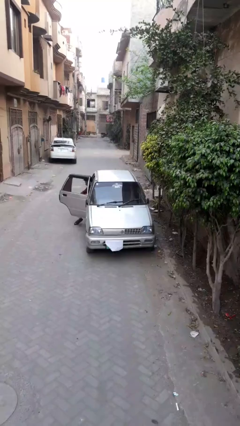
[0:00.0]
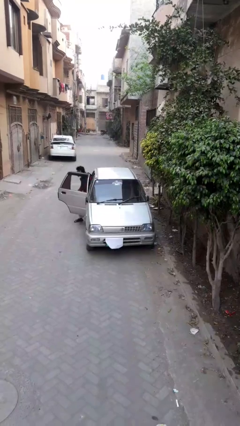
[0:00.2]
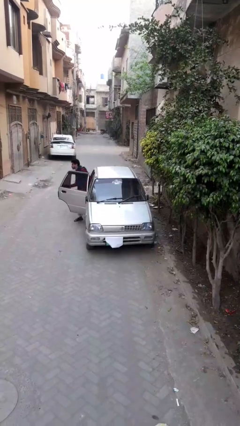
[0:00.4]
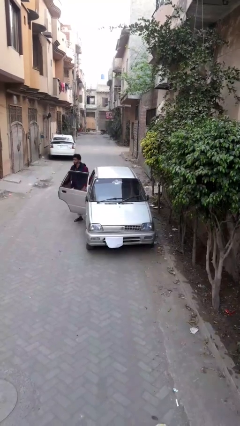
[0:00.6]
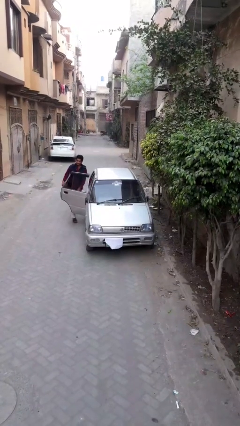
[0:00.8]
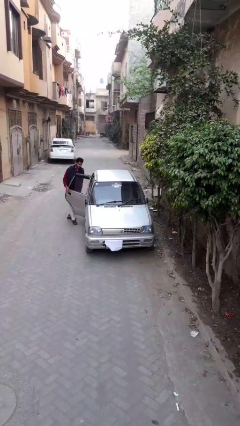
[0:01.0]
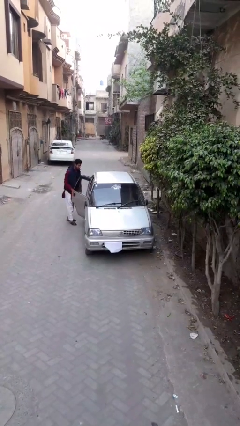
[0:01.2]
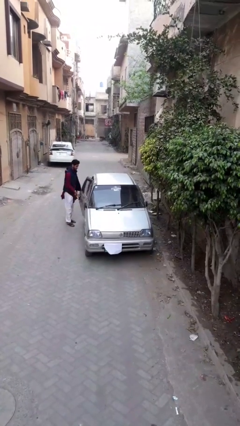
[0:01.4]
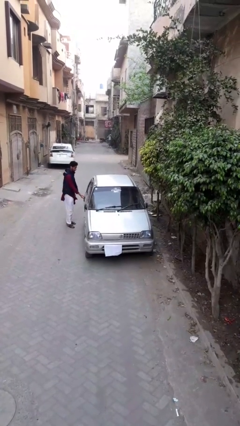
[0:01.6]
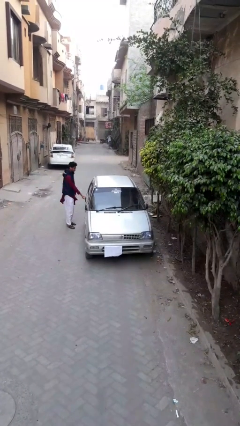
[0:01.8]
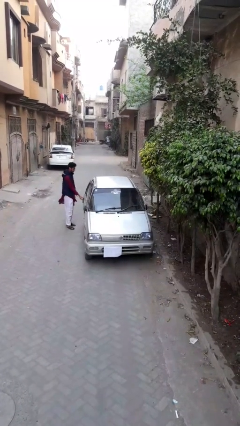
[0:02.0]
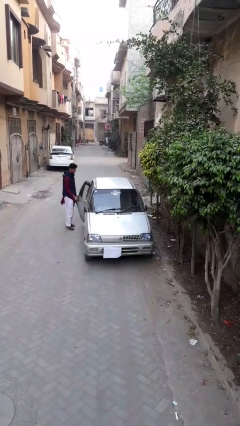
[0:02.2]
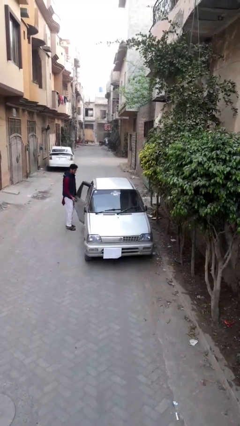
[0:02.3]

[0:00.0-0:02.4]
car drops off person

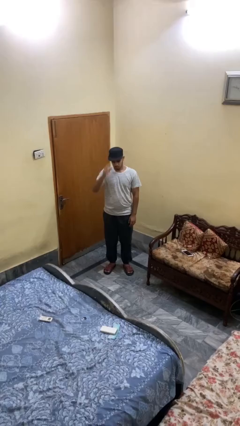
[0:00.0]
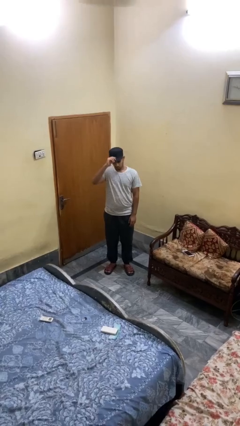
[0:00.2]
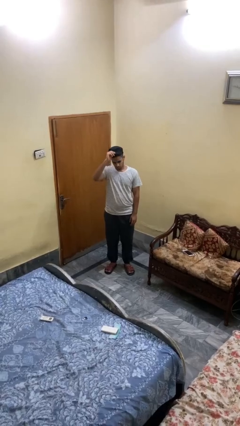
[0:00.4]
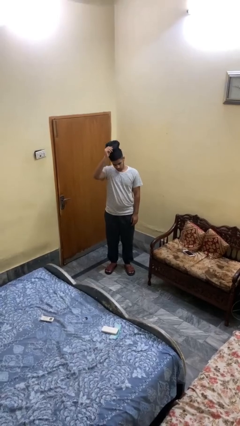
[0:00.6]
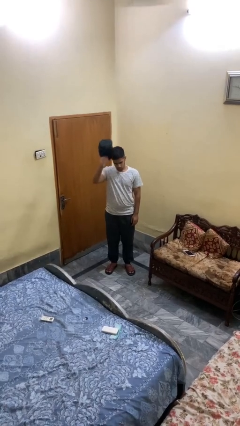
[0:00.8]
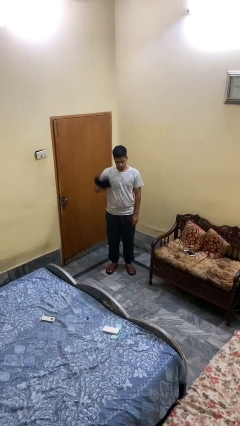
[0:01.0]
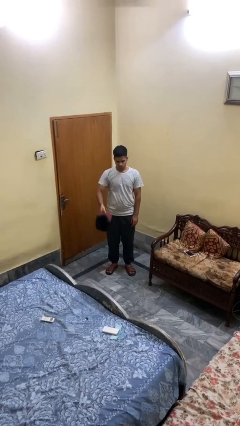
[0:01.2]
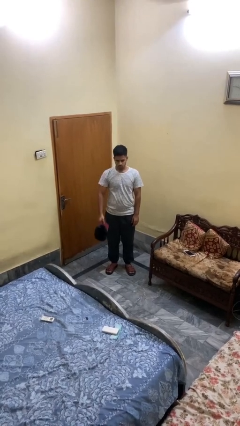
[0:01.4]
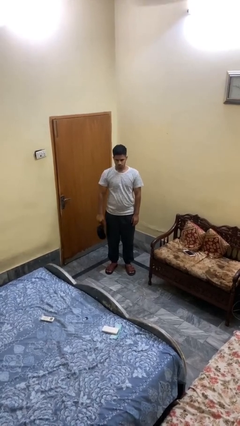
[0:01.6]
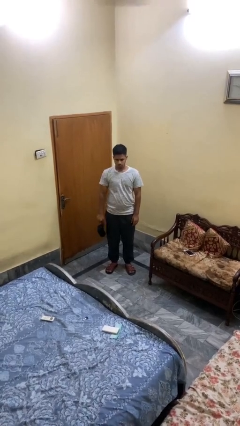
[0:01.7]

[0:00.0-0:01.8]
person takes off hat

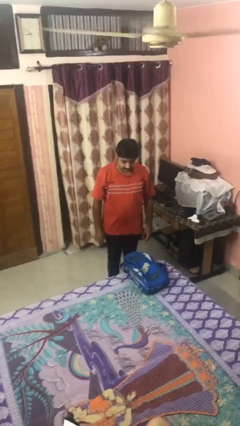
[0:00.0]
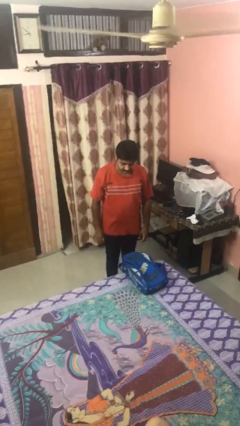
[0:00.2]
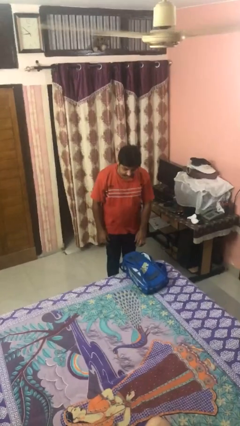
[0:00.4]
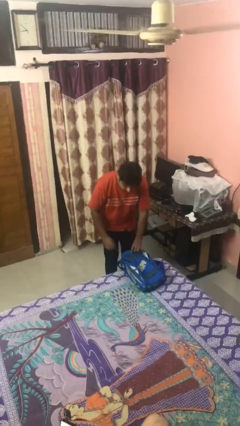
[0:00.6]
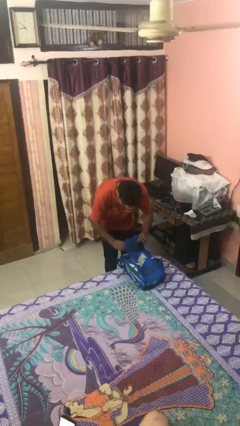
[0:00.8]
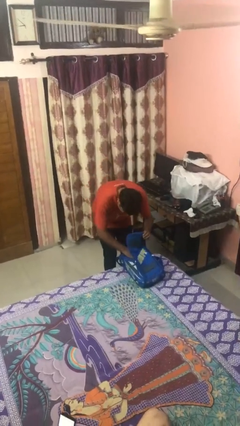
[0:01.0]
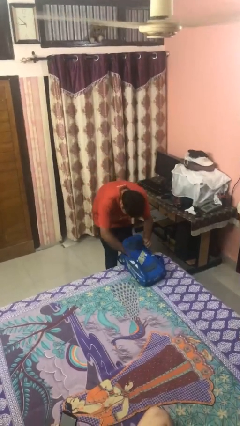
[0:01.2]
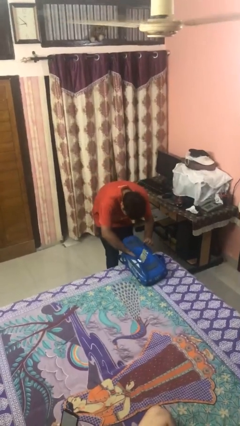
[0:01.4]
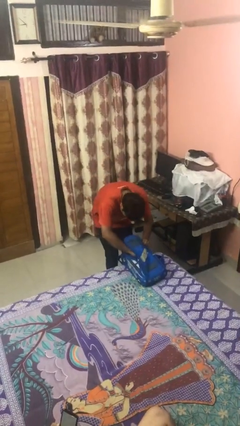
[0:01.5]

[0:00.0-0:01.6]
person searches in backpack

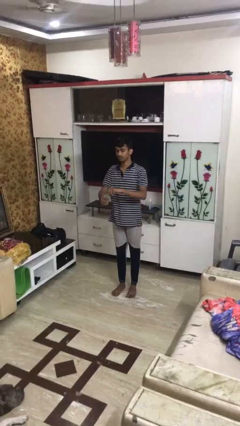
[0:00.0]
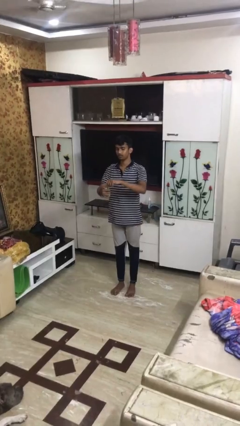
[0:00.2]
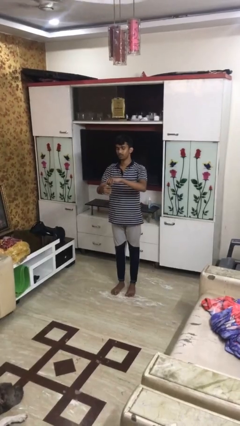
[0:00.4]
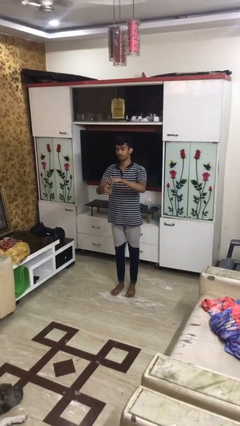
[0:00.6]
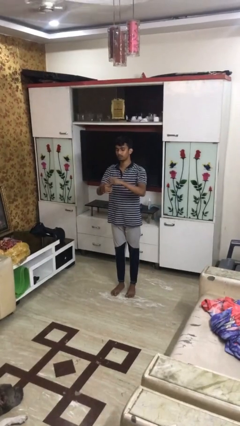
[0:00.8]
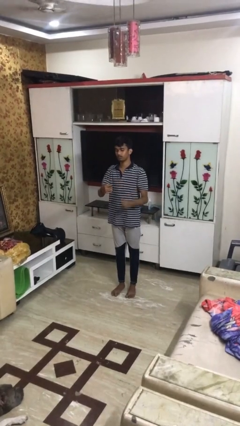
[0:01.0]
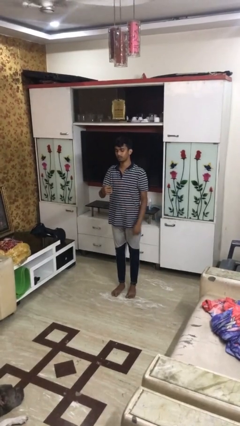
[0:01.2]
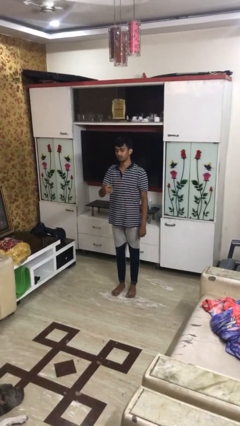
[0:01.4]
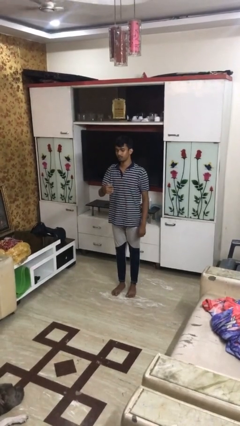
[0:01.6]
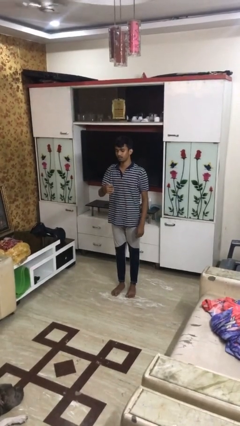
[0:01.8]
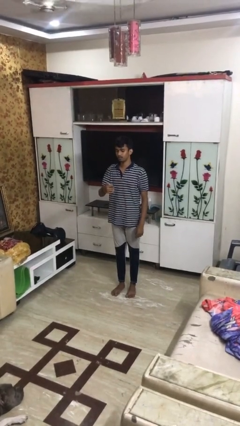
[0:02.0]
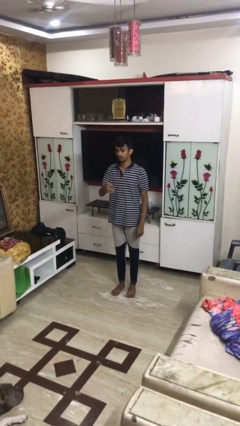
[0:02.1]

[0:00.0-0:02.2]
person opens beverage can

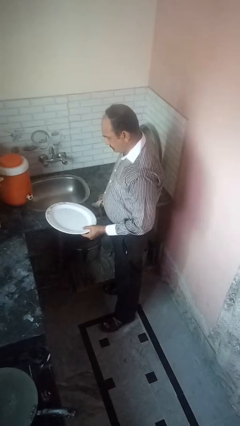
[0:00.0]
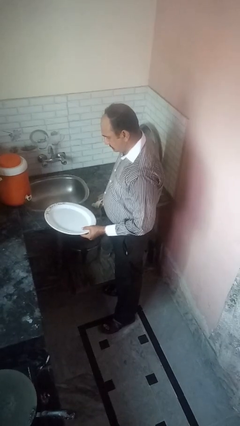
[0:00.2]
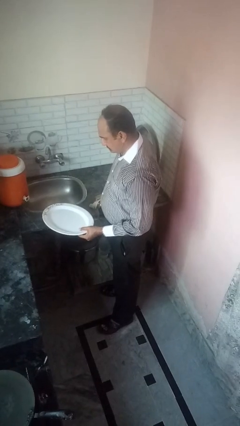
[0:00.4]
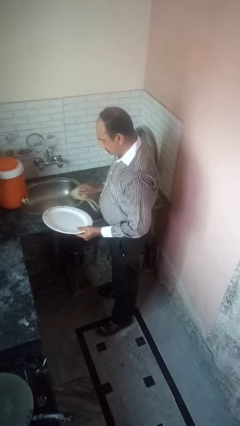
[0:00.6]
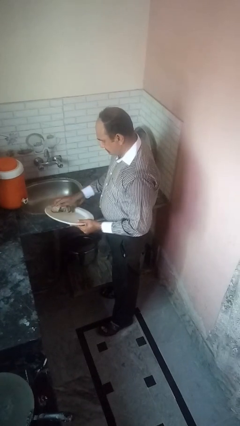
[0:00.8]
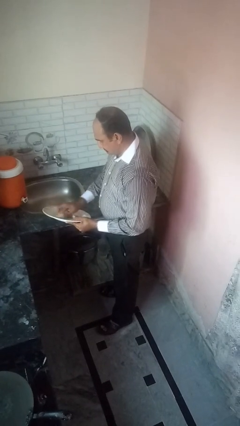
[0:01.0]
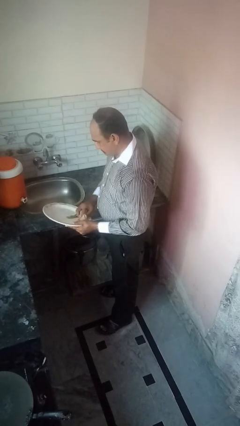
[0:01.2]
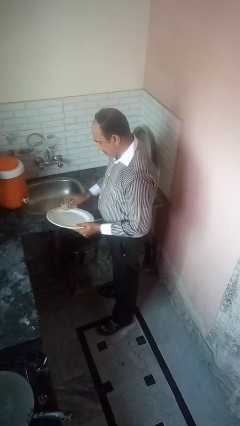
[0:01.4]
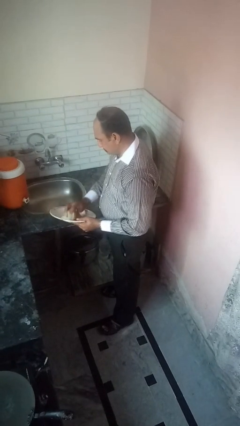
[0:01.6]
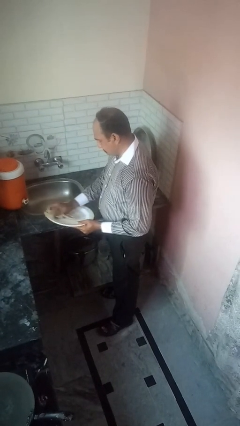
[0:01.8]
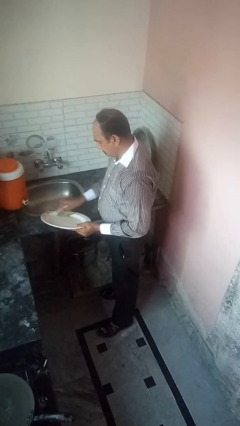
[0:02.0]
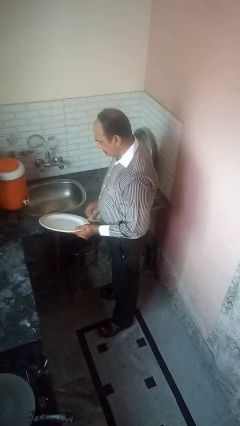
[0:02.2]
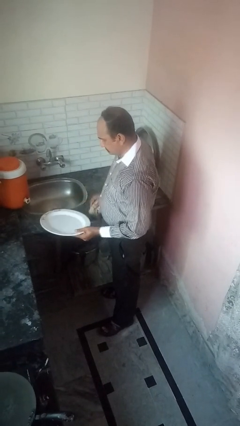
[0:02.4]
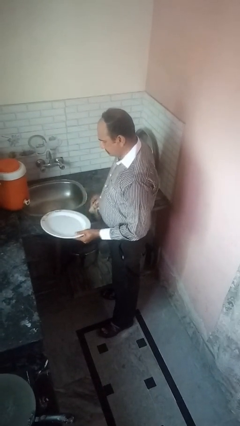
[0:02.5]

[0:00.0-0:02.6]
person dries dish

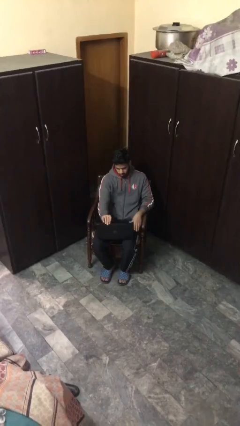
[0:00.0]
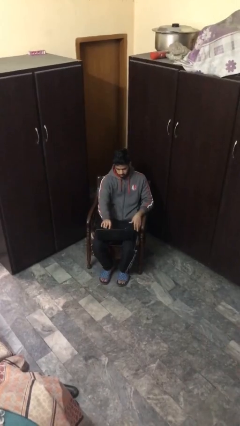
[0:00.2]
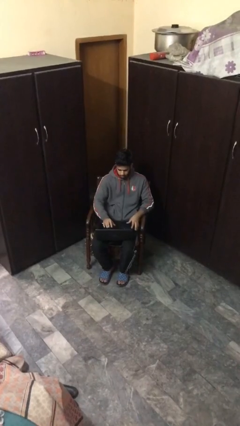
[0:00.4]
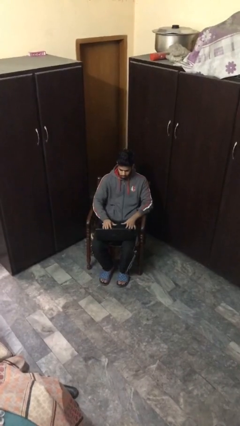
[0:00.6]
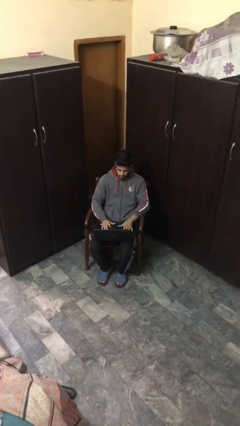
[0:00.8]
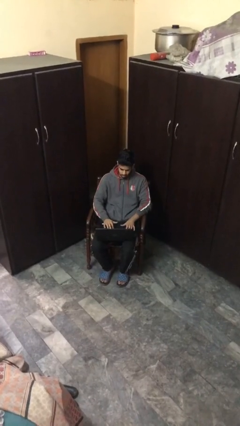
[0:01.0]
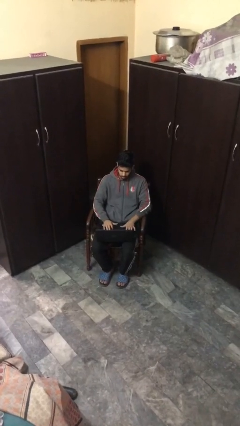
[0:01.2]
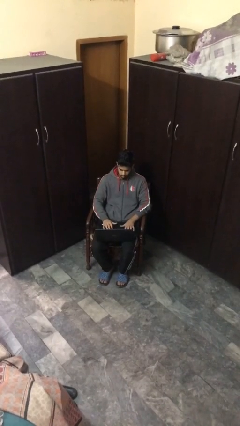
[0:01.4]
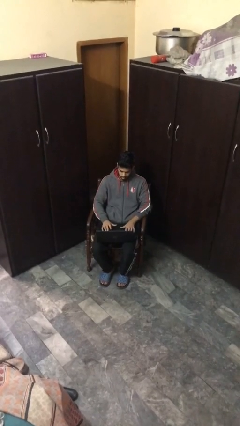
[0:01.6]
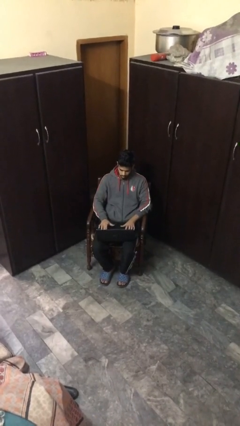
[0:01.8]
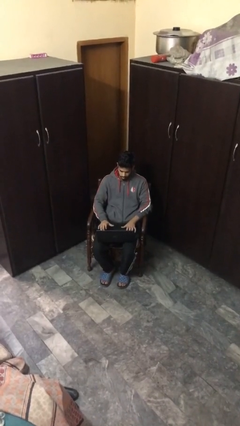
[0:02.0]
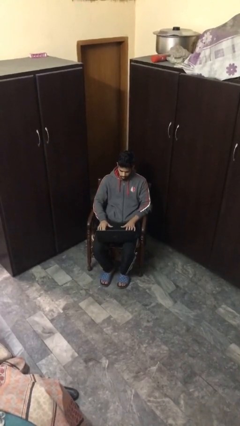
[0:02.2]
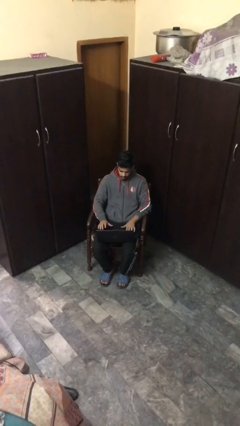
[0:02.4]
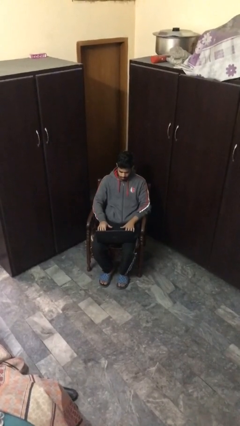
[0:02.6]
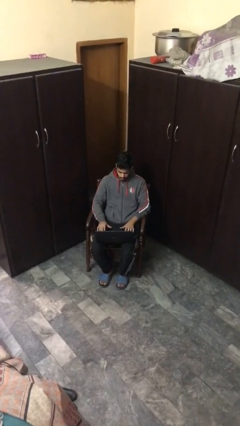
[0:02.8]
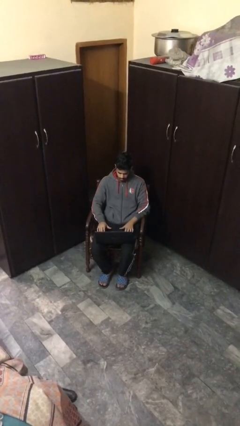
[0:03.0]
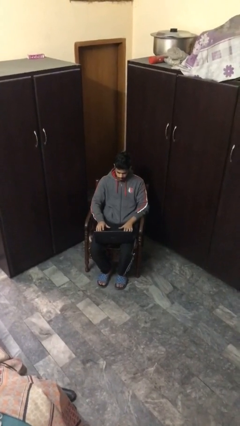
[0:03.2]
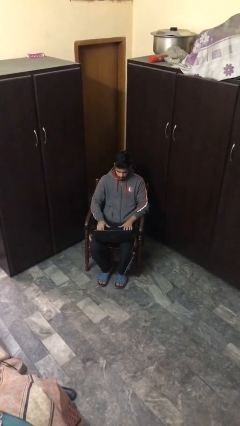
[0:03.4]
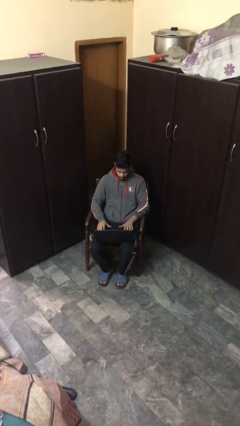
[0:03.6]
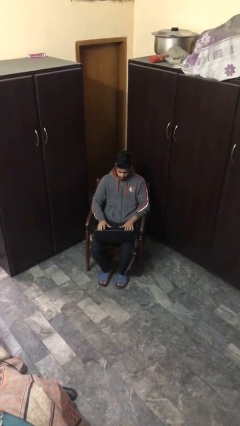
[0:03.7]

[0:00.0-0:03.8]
person interacts with laptop

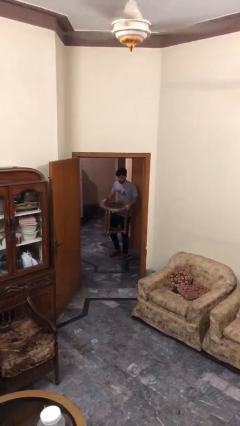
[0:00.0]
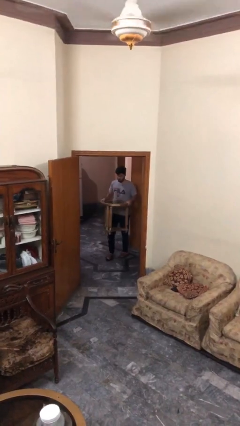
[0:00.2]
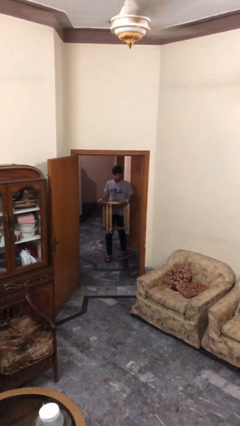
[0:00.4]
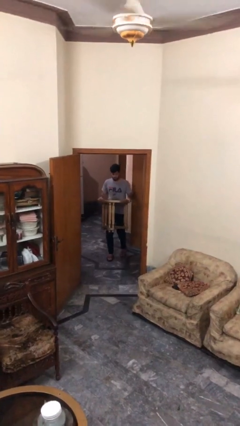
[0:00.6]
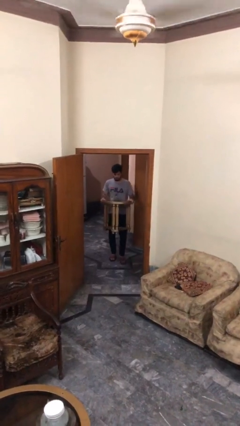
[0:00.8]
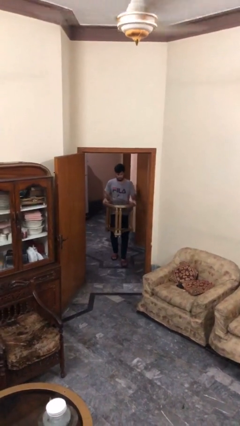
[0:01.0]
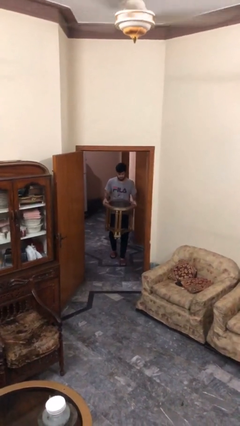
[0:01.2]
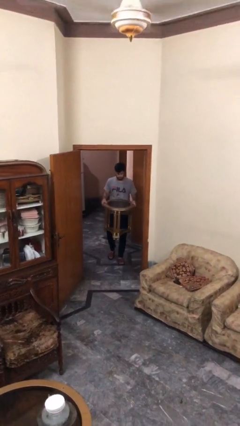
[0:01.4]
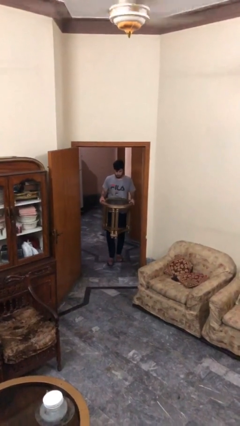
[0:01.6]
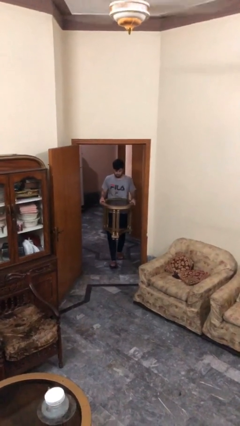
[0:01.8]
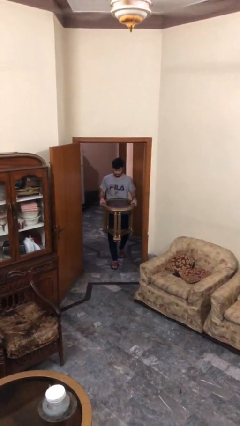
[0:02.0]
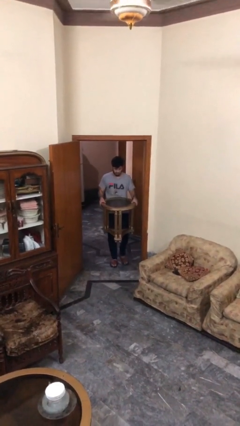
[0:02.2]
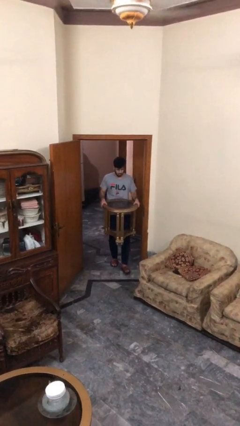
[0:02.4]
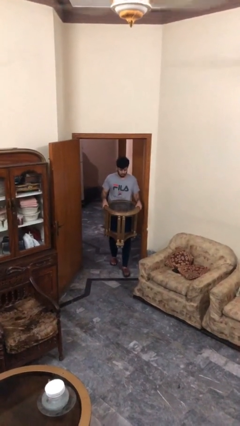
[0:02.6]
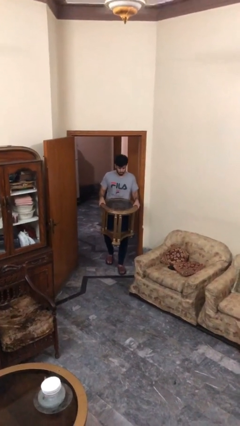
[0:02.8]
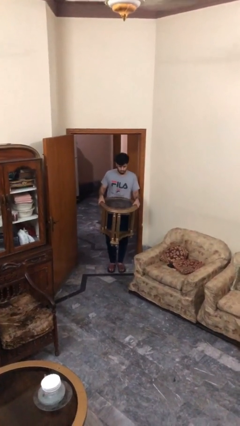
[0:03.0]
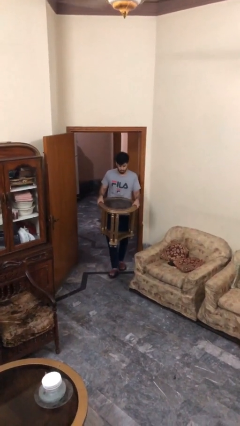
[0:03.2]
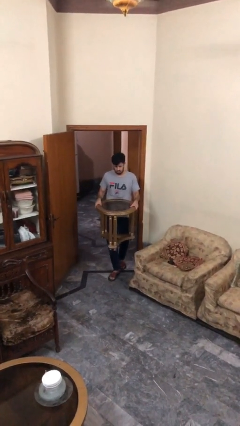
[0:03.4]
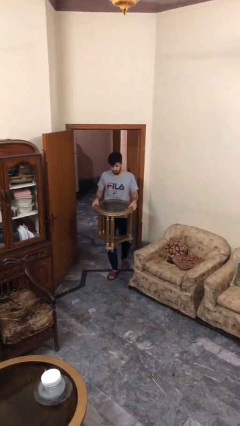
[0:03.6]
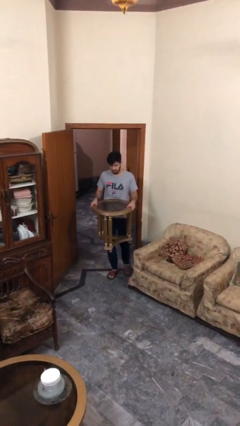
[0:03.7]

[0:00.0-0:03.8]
person carries furniture
